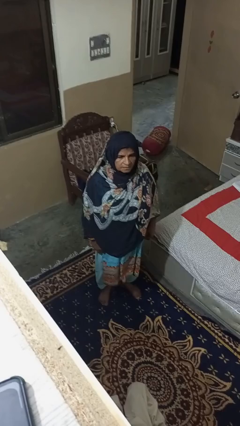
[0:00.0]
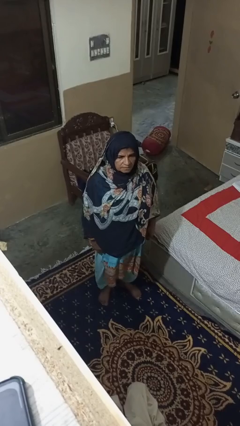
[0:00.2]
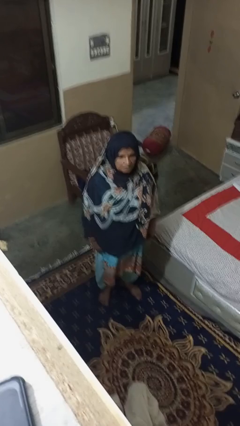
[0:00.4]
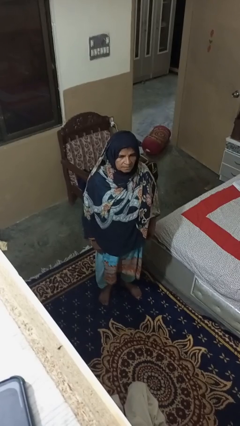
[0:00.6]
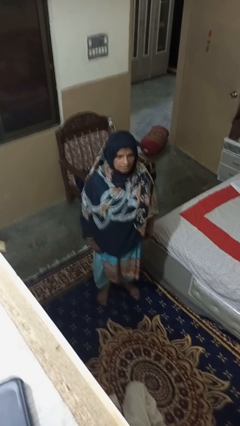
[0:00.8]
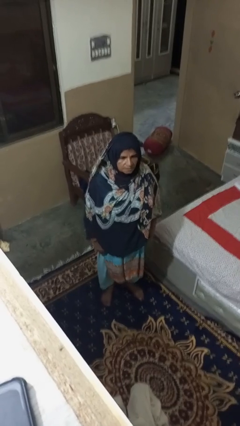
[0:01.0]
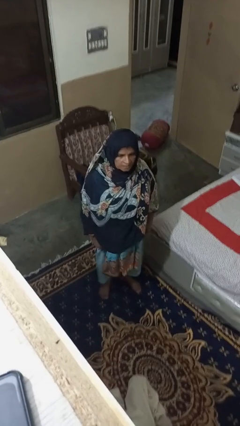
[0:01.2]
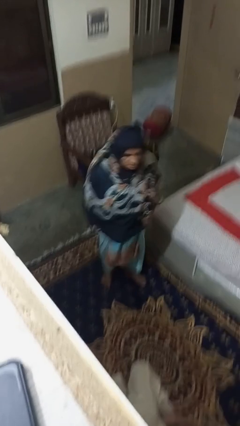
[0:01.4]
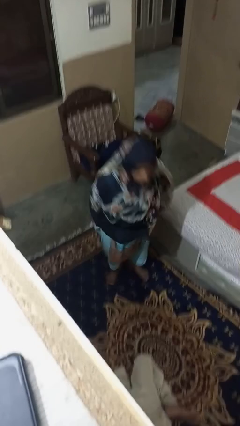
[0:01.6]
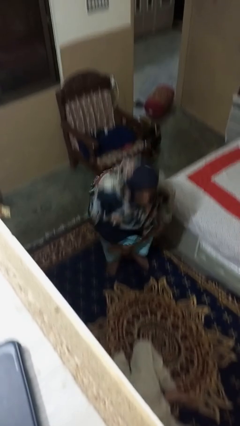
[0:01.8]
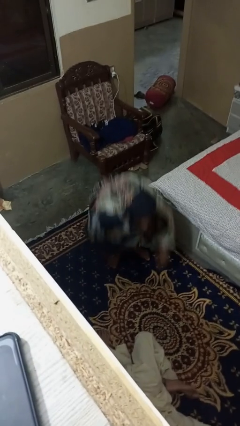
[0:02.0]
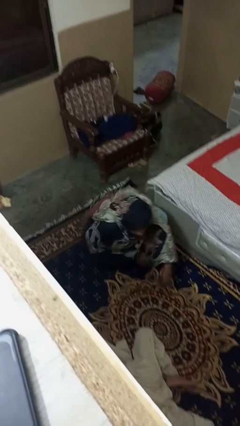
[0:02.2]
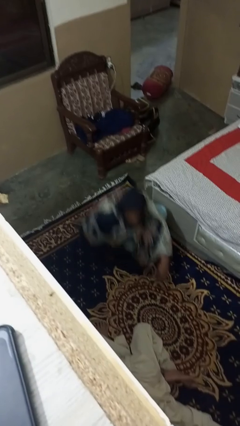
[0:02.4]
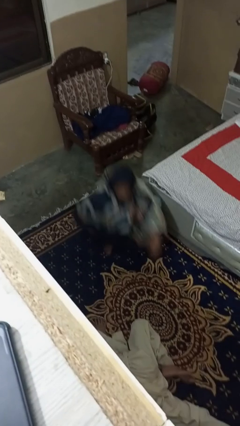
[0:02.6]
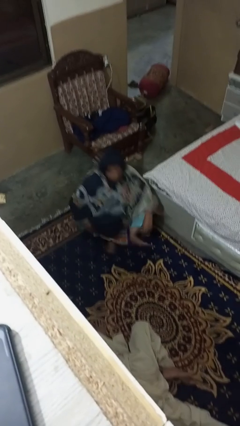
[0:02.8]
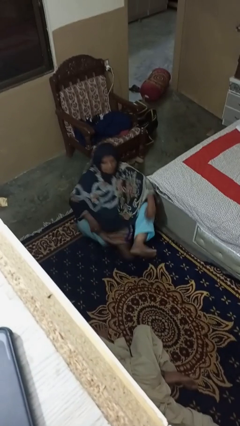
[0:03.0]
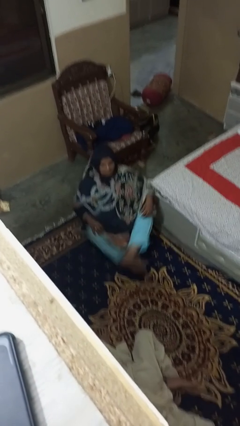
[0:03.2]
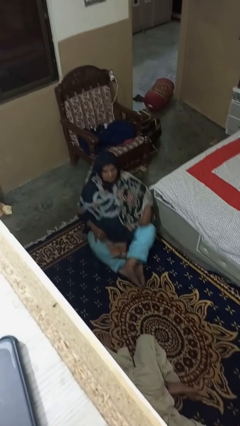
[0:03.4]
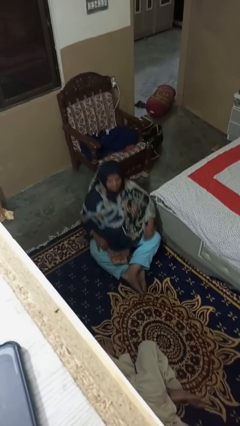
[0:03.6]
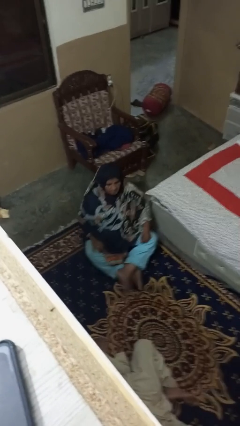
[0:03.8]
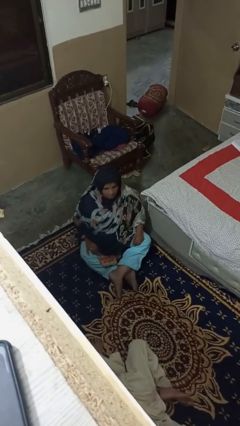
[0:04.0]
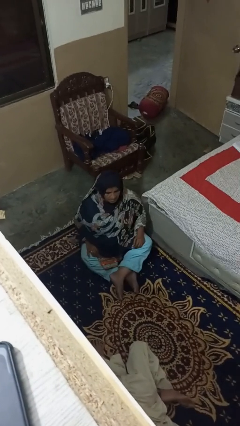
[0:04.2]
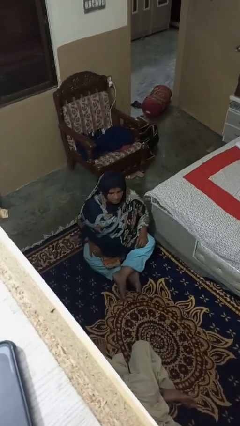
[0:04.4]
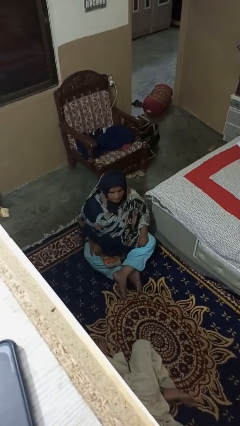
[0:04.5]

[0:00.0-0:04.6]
person sits crisscross

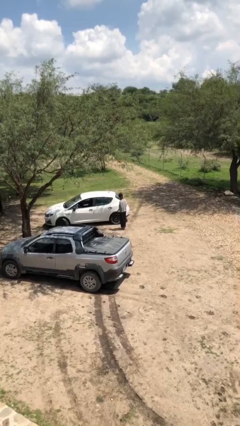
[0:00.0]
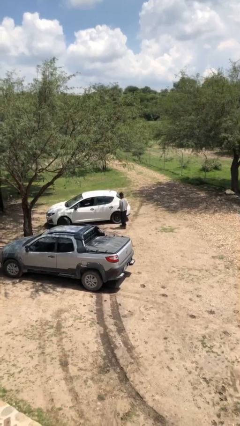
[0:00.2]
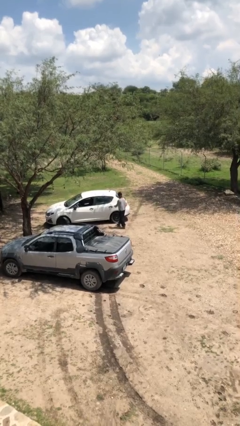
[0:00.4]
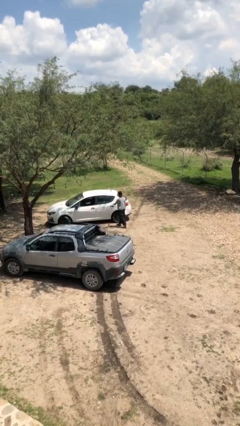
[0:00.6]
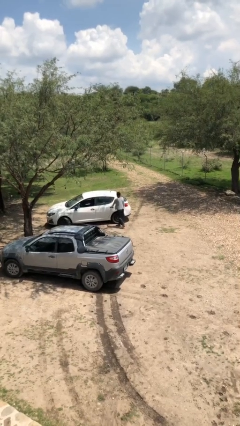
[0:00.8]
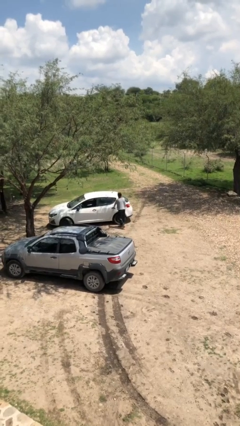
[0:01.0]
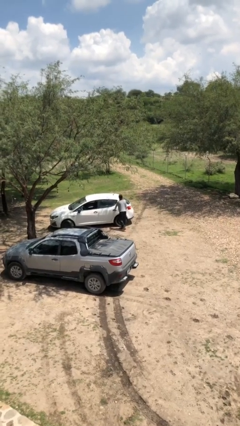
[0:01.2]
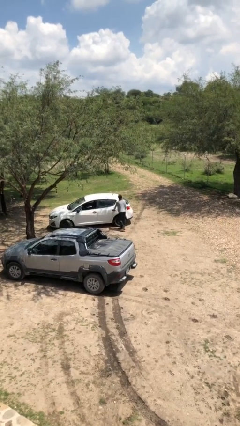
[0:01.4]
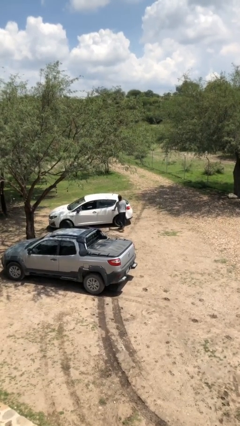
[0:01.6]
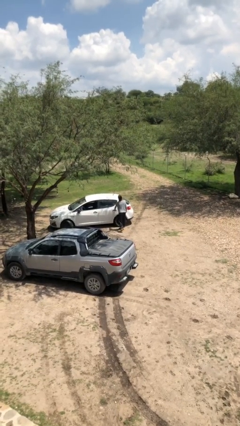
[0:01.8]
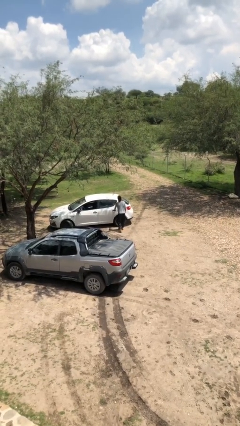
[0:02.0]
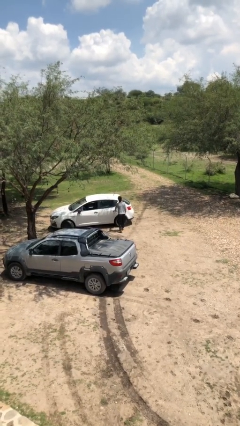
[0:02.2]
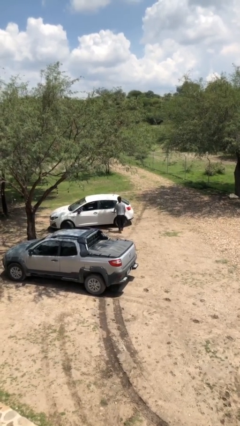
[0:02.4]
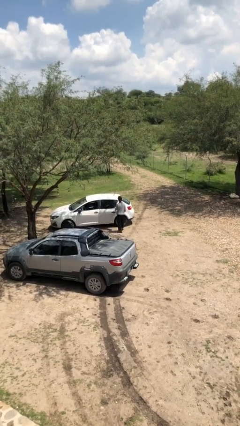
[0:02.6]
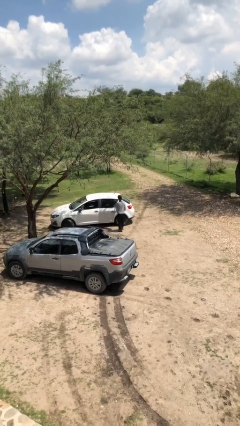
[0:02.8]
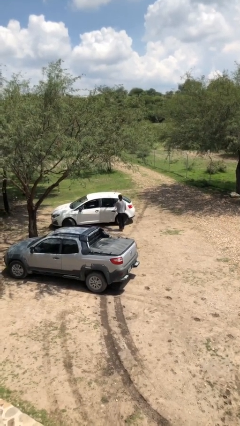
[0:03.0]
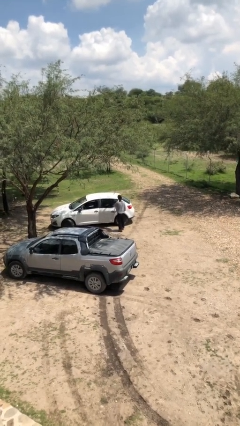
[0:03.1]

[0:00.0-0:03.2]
person opens car door

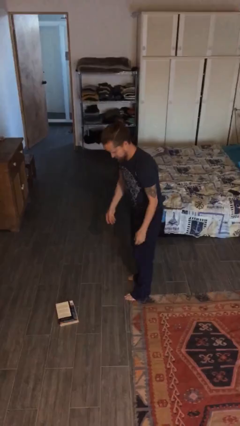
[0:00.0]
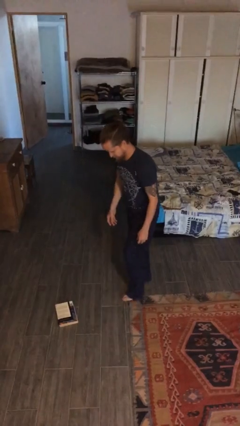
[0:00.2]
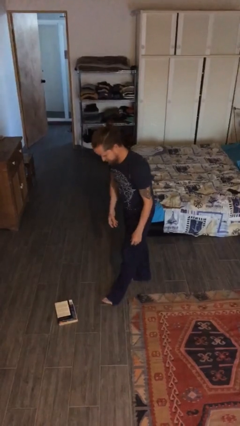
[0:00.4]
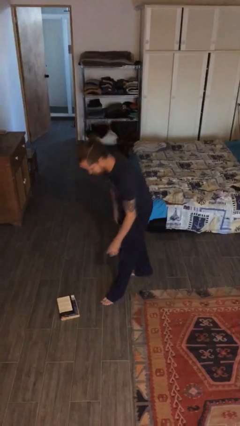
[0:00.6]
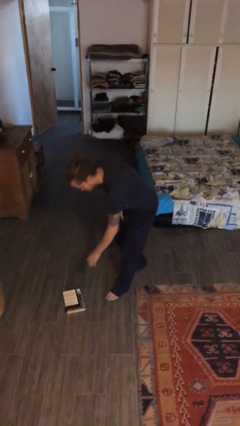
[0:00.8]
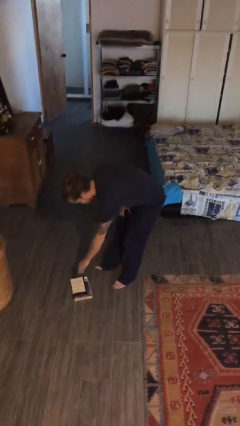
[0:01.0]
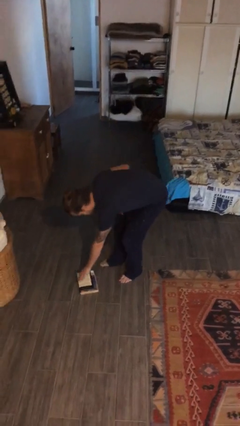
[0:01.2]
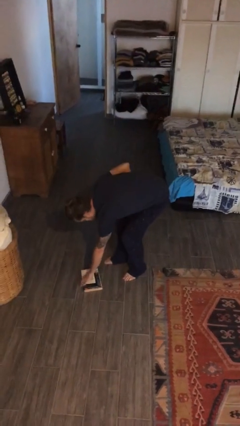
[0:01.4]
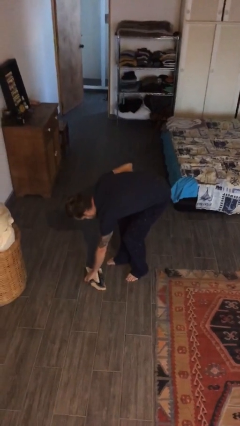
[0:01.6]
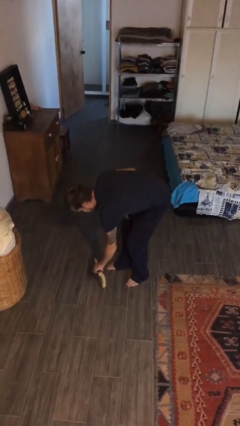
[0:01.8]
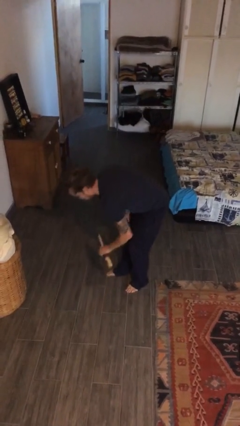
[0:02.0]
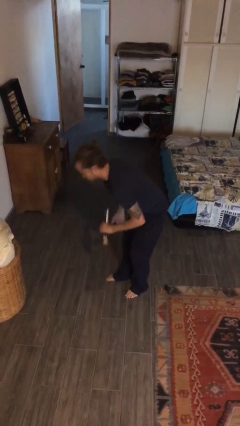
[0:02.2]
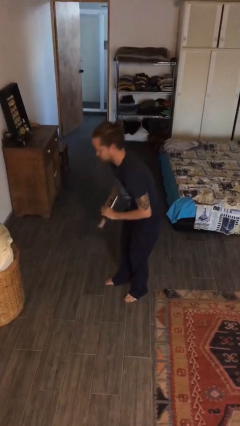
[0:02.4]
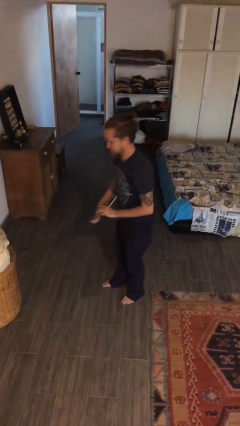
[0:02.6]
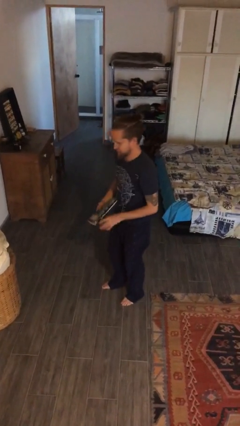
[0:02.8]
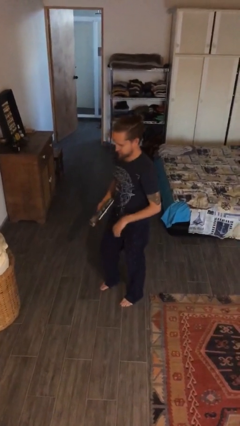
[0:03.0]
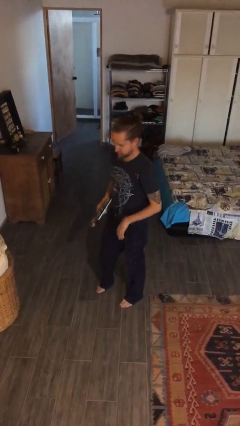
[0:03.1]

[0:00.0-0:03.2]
person picks up object from floor

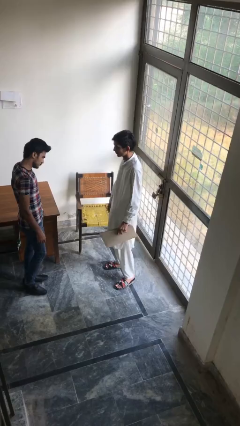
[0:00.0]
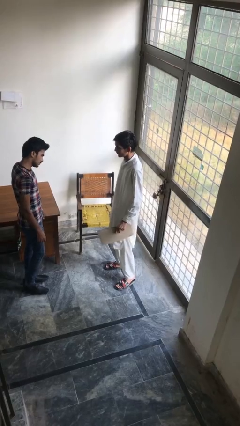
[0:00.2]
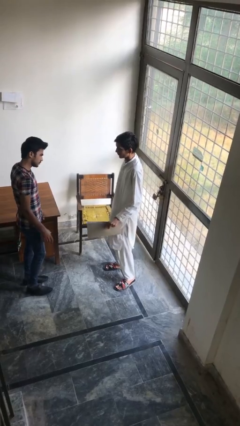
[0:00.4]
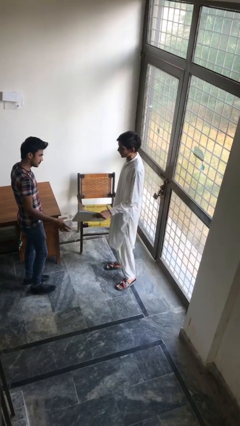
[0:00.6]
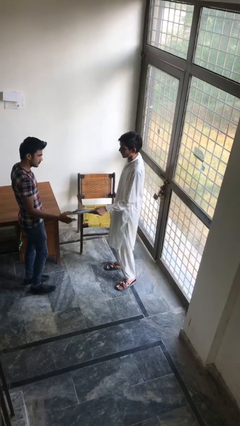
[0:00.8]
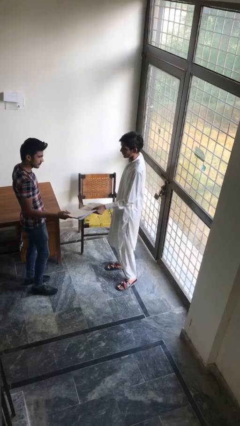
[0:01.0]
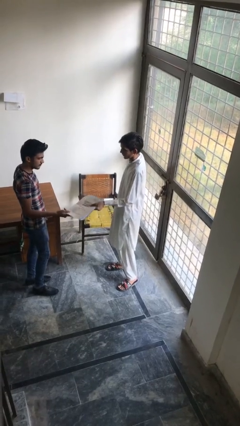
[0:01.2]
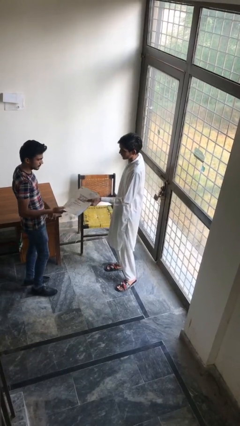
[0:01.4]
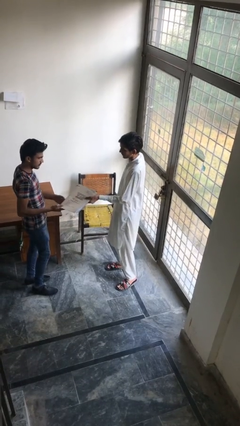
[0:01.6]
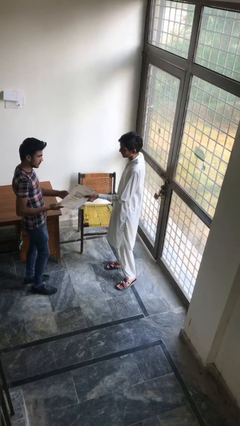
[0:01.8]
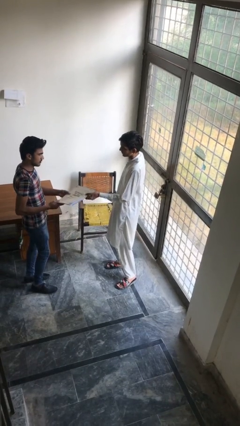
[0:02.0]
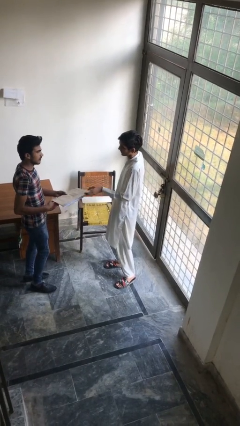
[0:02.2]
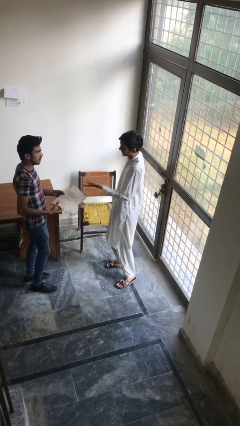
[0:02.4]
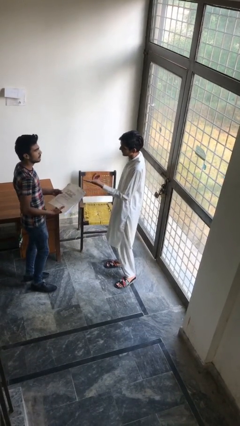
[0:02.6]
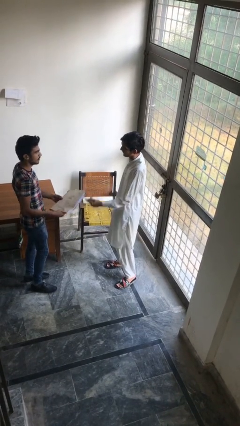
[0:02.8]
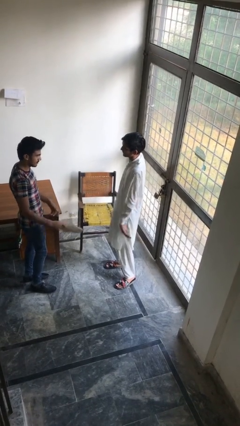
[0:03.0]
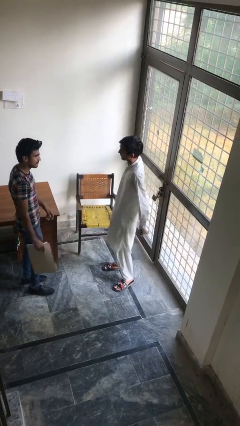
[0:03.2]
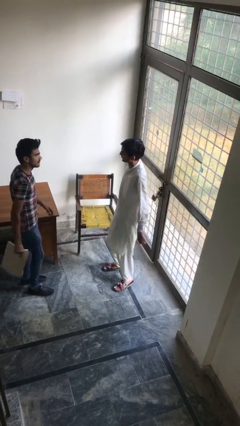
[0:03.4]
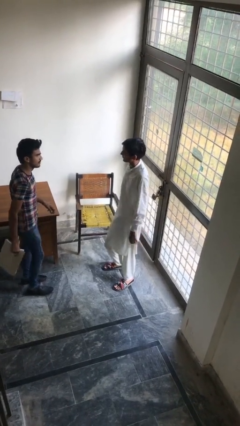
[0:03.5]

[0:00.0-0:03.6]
person transfers object to person

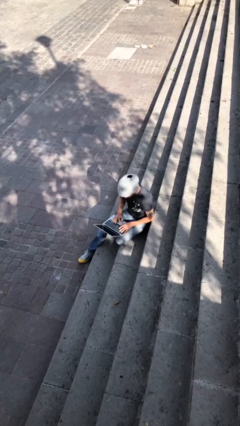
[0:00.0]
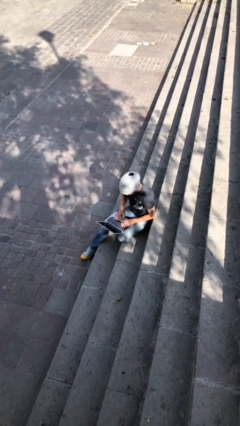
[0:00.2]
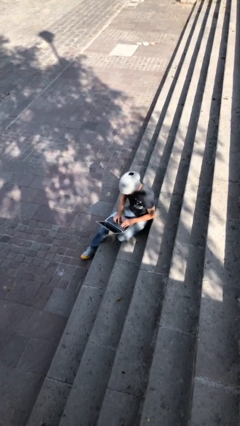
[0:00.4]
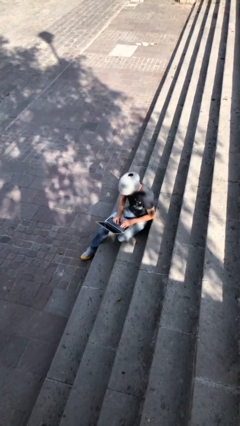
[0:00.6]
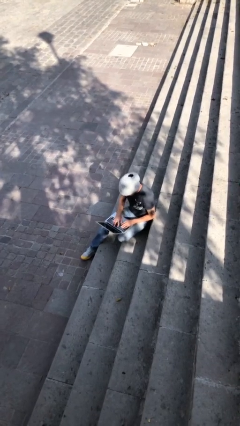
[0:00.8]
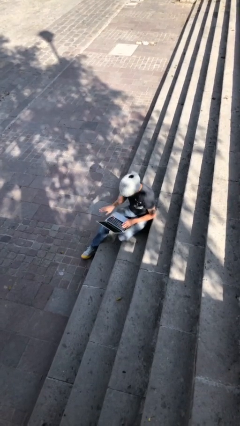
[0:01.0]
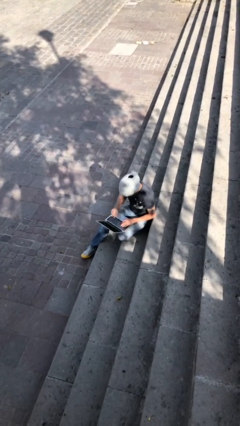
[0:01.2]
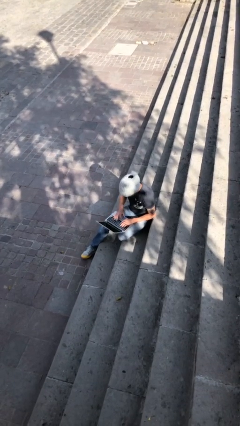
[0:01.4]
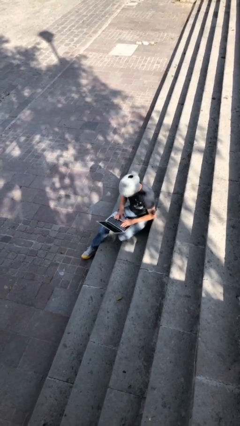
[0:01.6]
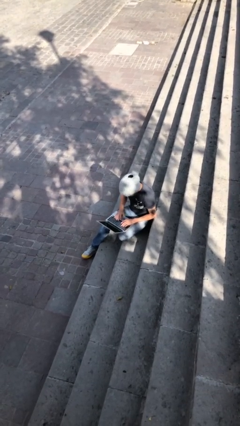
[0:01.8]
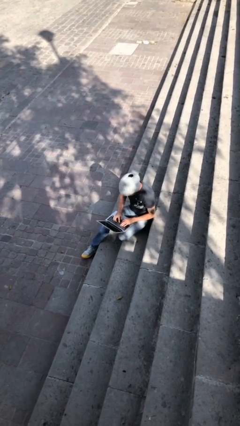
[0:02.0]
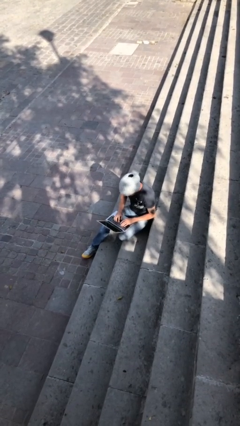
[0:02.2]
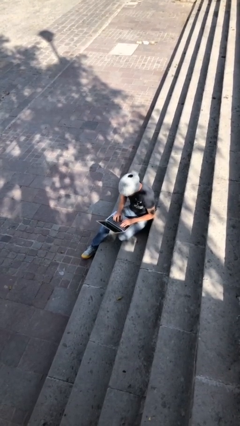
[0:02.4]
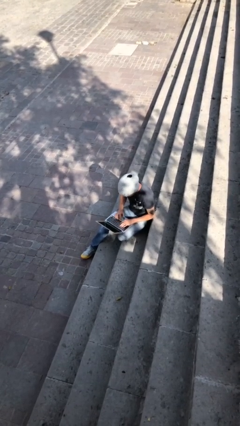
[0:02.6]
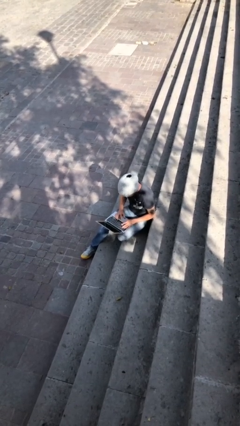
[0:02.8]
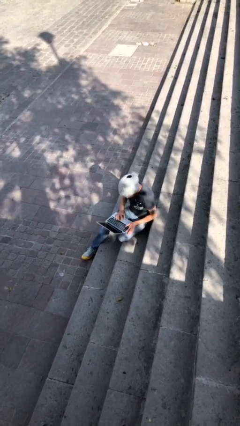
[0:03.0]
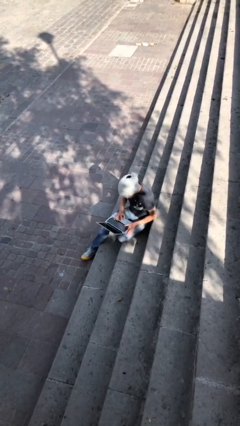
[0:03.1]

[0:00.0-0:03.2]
person interacts with laptop
